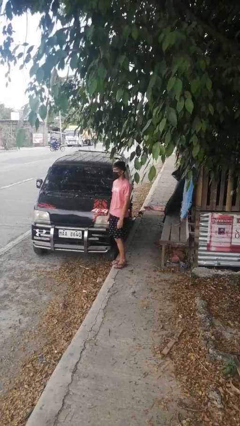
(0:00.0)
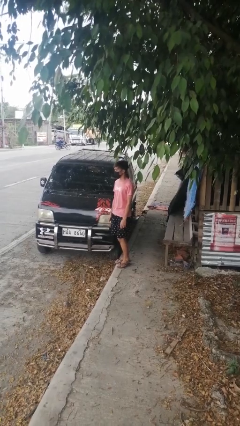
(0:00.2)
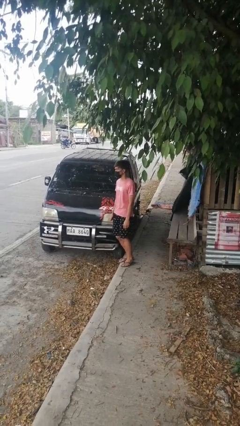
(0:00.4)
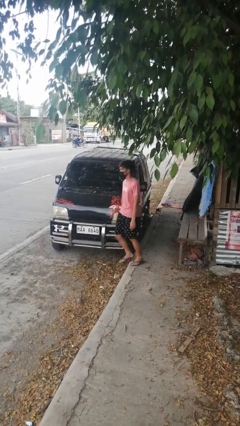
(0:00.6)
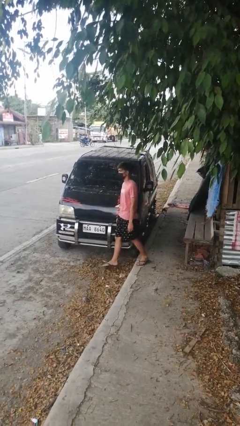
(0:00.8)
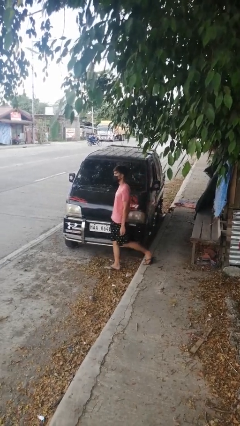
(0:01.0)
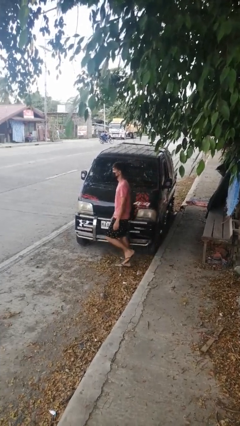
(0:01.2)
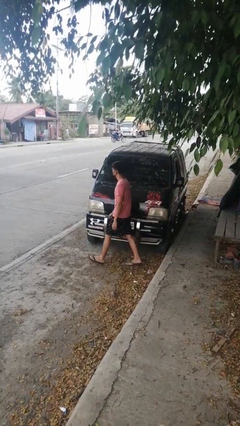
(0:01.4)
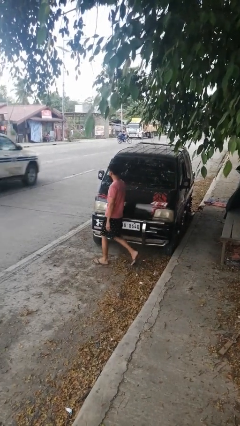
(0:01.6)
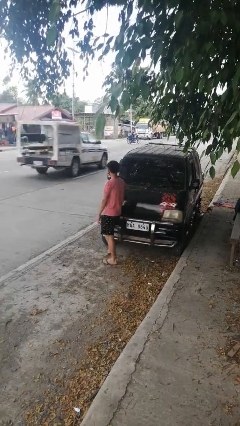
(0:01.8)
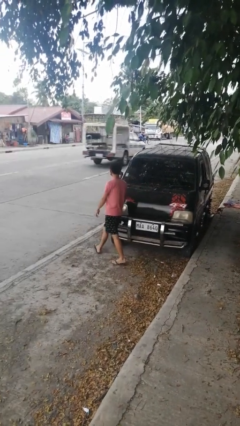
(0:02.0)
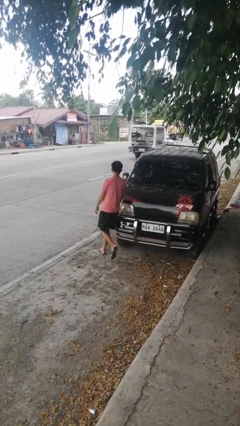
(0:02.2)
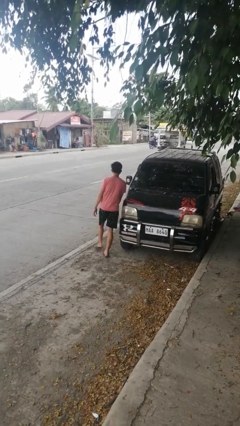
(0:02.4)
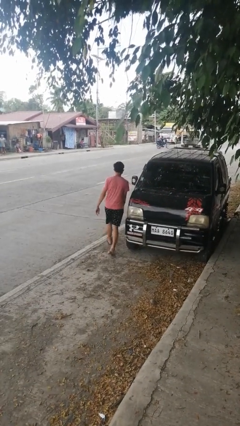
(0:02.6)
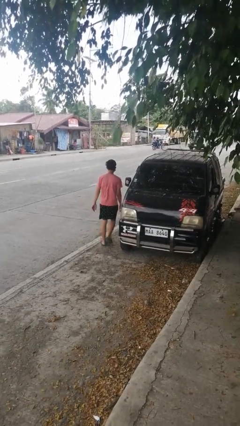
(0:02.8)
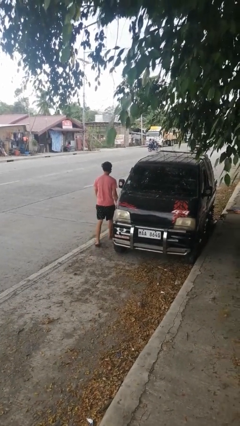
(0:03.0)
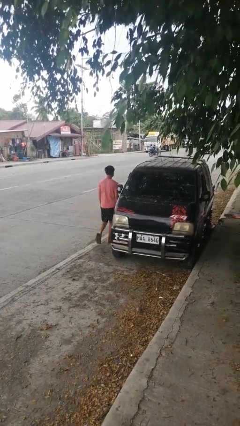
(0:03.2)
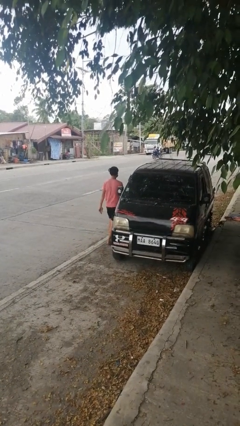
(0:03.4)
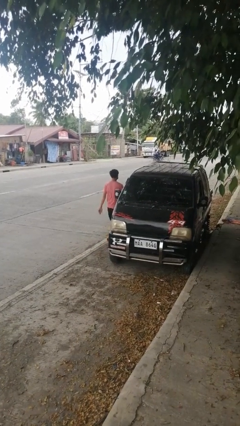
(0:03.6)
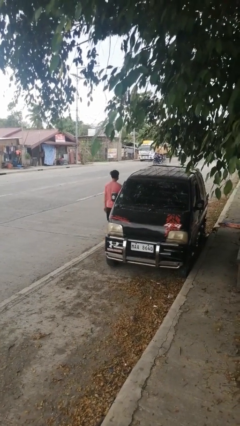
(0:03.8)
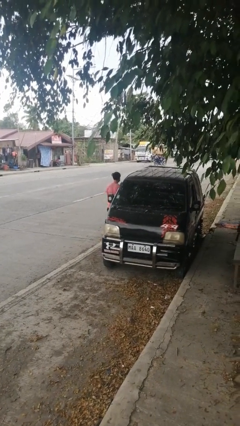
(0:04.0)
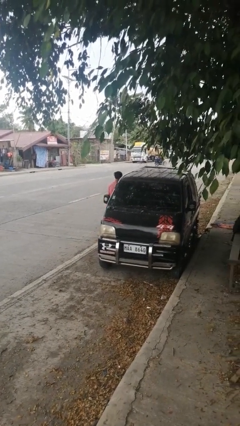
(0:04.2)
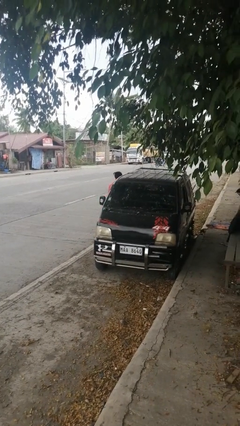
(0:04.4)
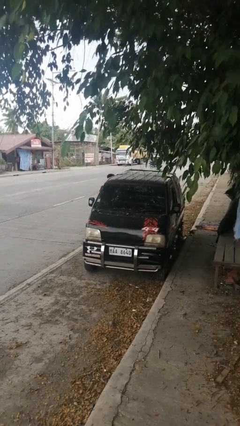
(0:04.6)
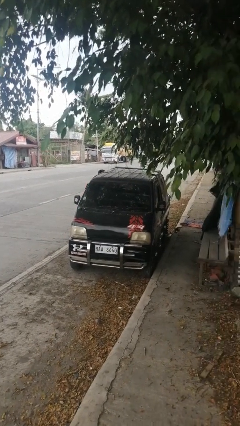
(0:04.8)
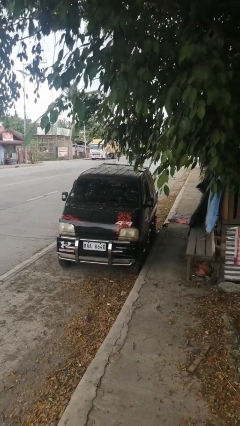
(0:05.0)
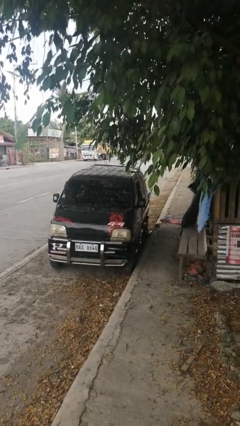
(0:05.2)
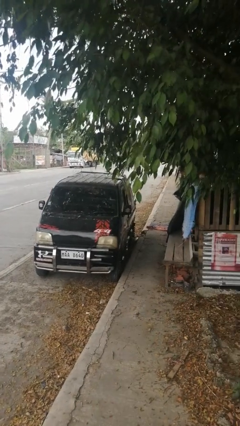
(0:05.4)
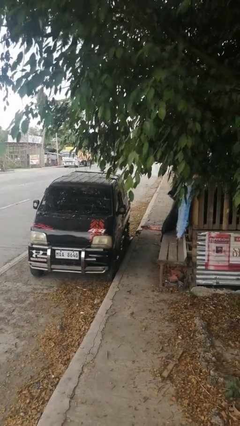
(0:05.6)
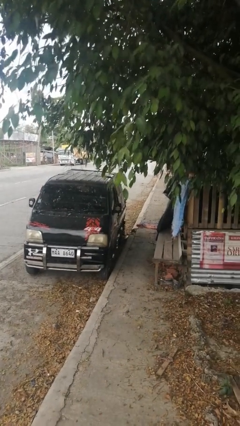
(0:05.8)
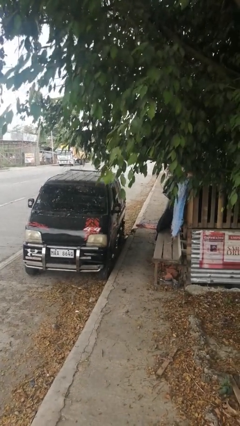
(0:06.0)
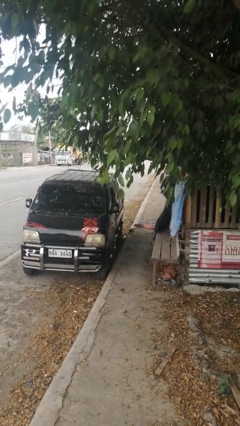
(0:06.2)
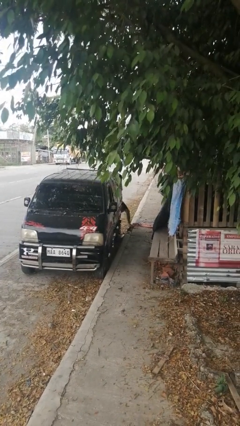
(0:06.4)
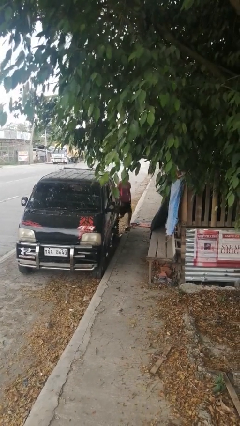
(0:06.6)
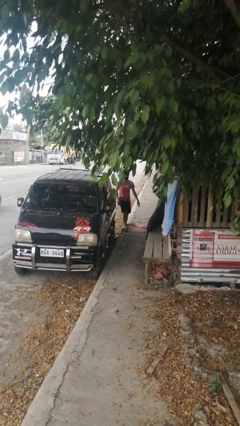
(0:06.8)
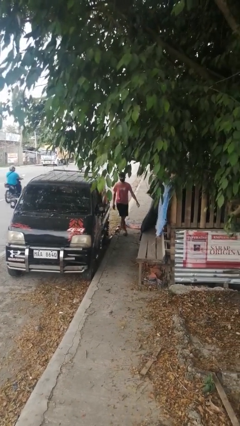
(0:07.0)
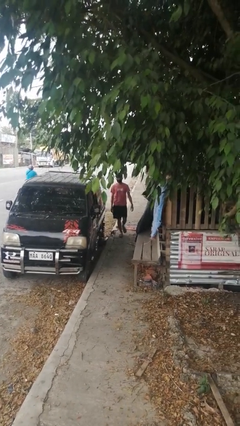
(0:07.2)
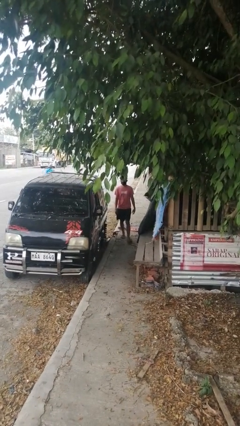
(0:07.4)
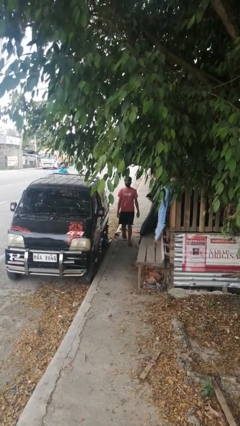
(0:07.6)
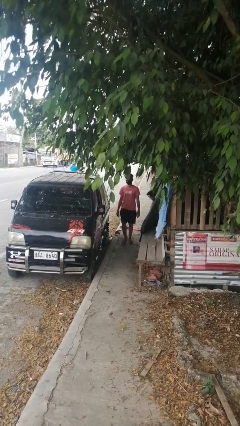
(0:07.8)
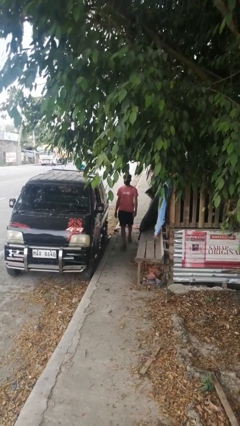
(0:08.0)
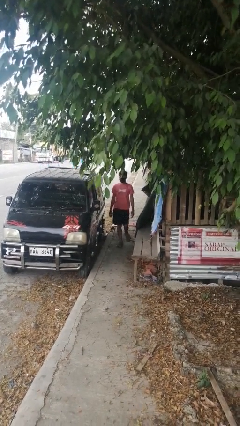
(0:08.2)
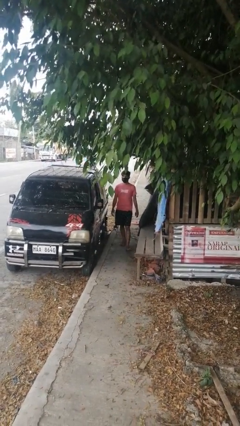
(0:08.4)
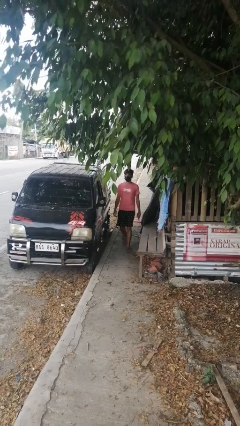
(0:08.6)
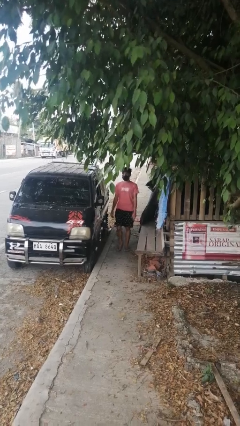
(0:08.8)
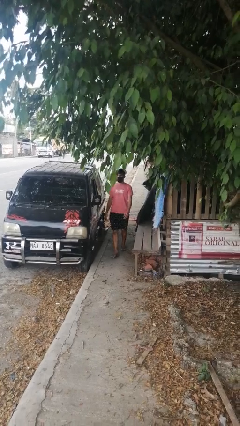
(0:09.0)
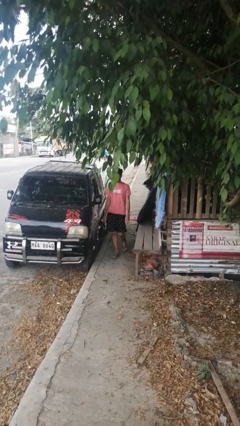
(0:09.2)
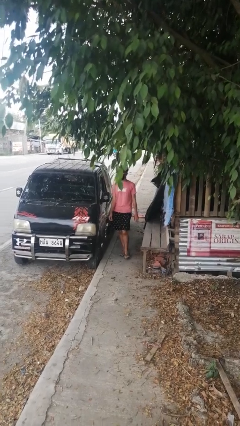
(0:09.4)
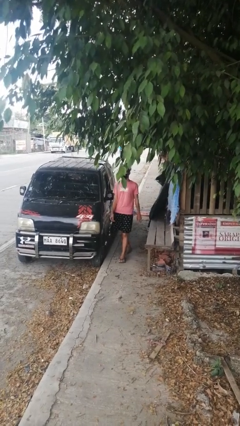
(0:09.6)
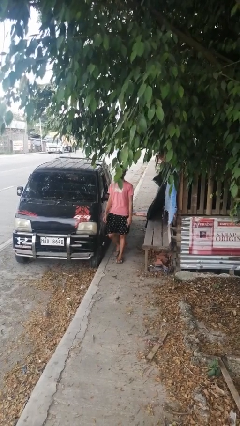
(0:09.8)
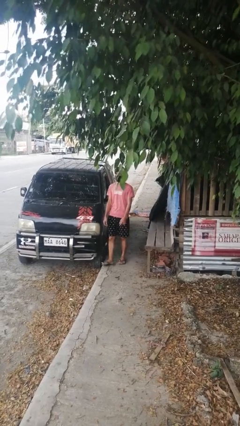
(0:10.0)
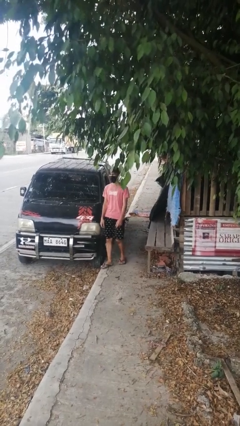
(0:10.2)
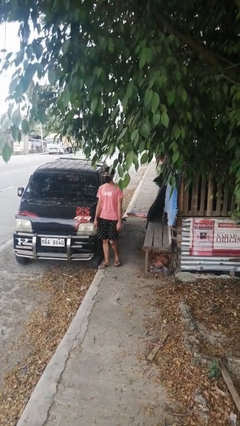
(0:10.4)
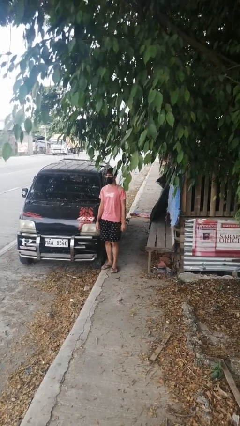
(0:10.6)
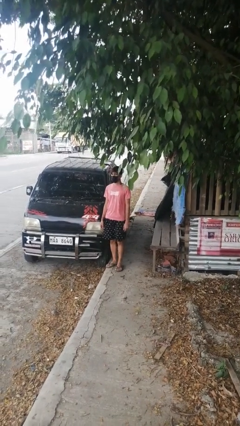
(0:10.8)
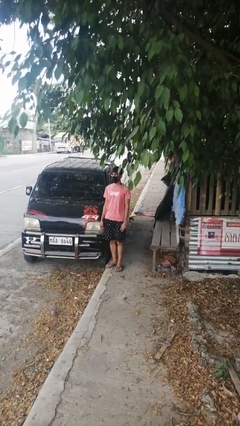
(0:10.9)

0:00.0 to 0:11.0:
person walks around car

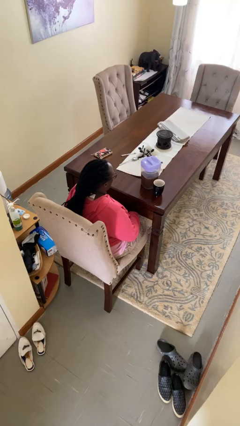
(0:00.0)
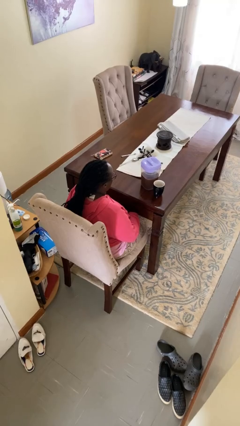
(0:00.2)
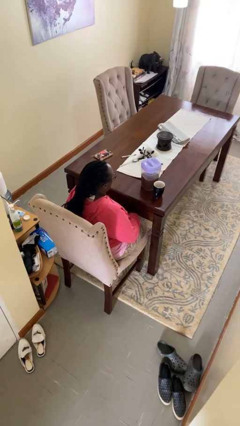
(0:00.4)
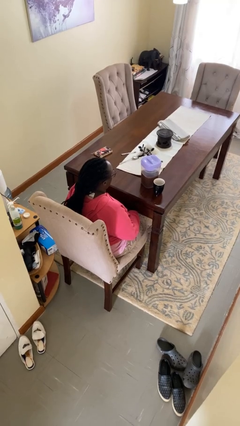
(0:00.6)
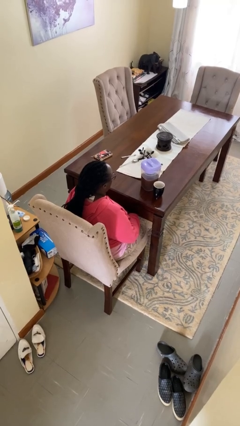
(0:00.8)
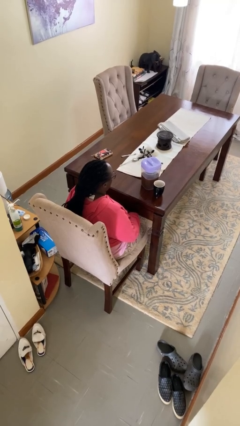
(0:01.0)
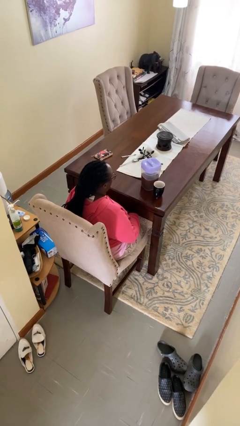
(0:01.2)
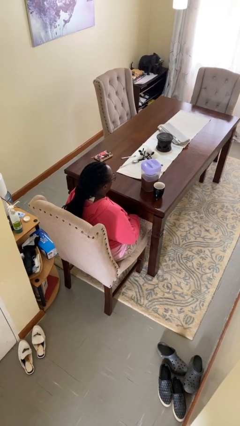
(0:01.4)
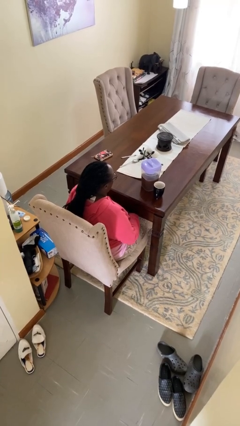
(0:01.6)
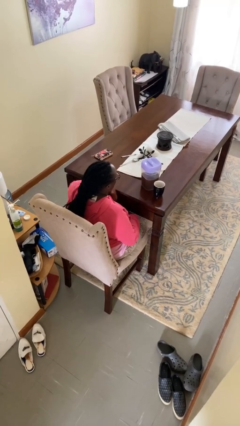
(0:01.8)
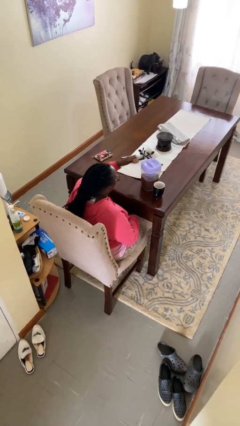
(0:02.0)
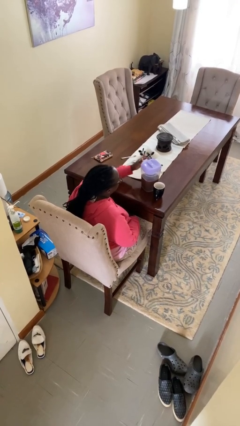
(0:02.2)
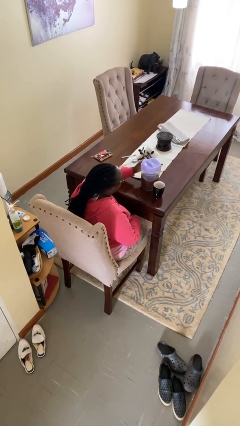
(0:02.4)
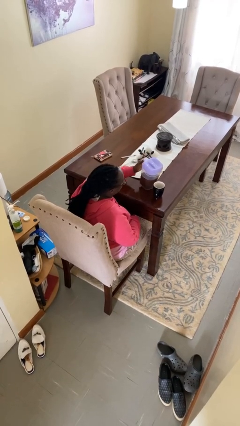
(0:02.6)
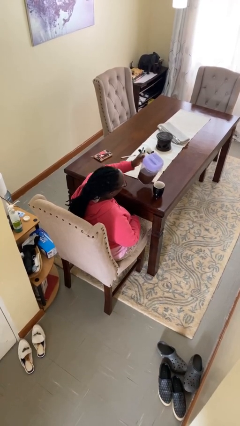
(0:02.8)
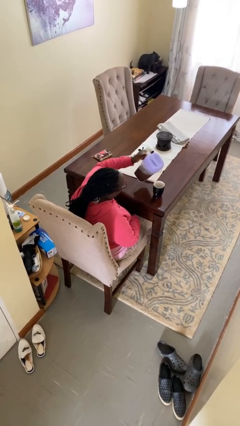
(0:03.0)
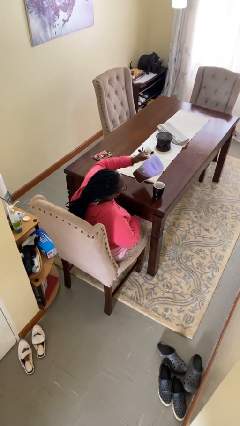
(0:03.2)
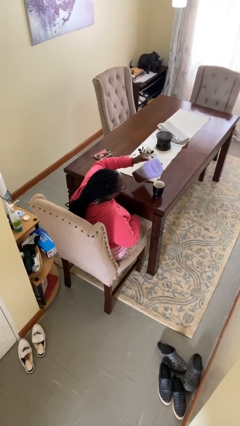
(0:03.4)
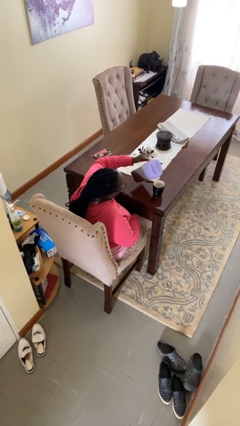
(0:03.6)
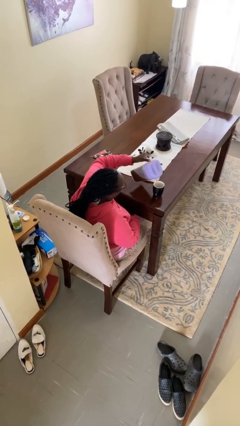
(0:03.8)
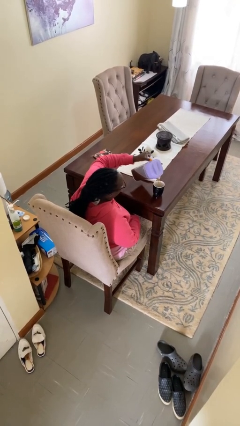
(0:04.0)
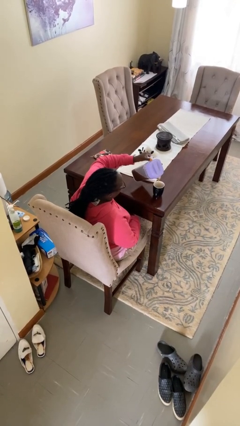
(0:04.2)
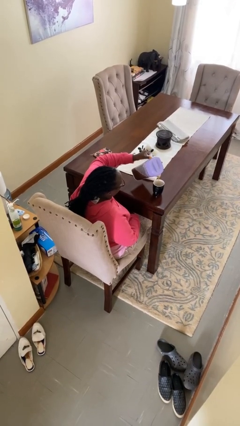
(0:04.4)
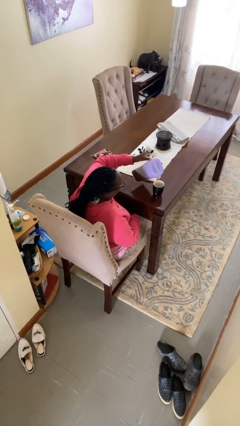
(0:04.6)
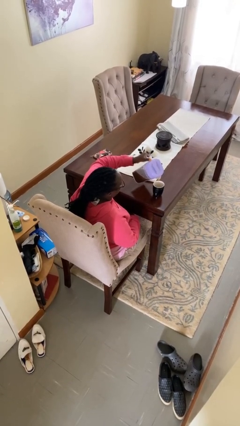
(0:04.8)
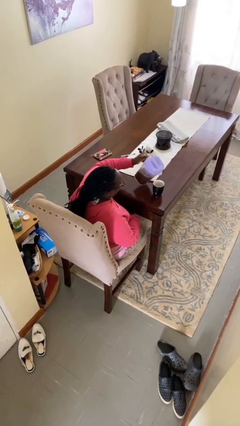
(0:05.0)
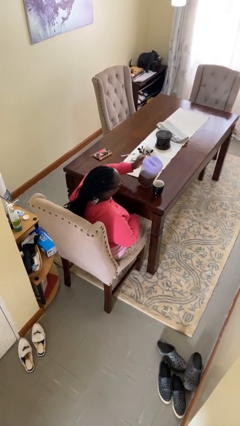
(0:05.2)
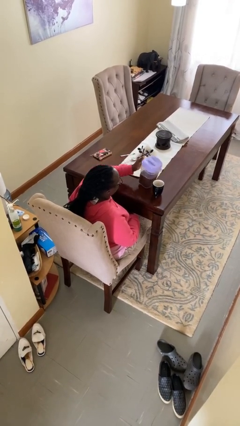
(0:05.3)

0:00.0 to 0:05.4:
person pours coffee into mug

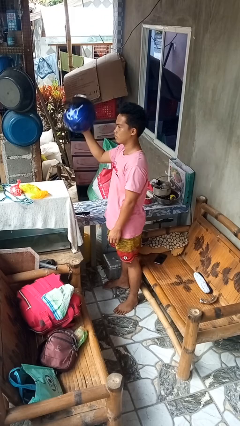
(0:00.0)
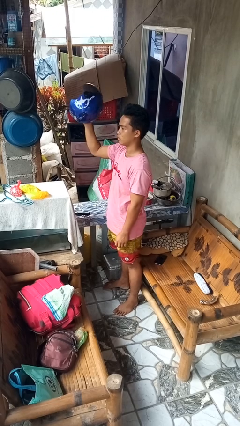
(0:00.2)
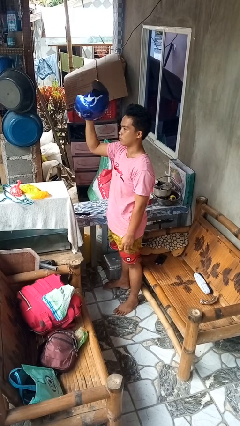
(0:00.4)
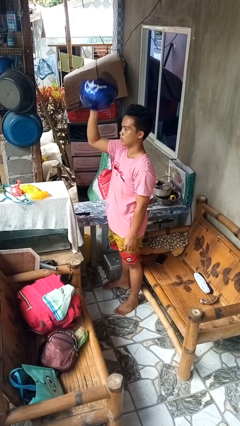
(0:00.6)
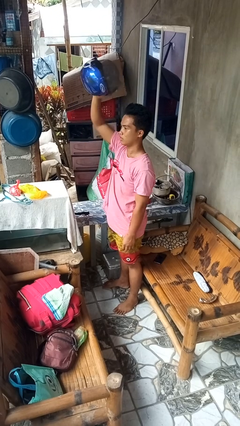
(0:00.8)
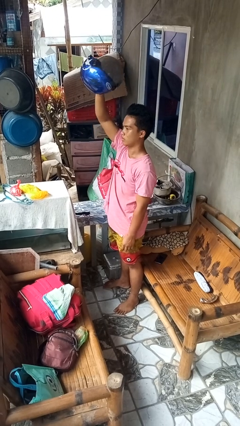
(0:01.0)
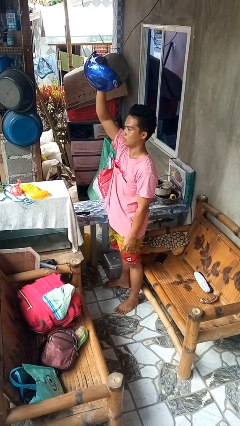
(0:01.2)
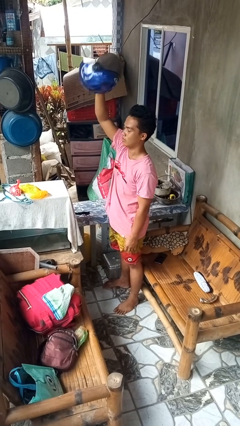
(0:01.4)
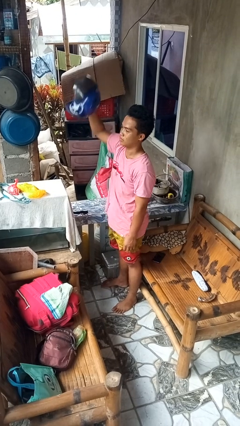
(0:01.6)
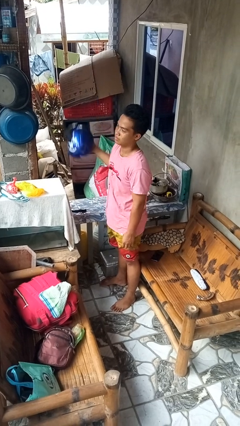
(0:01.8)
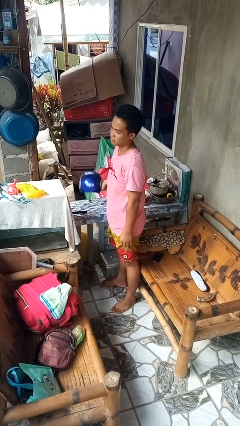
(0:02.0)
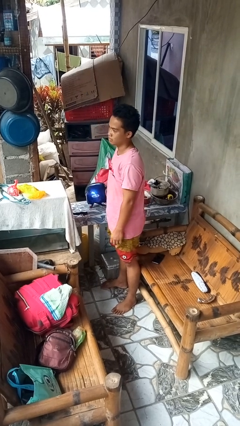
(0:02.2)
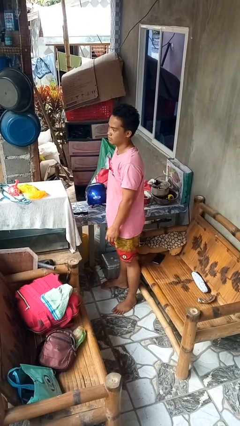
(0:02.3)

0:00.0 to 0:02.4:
person holds object above head
